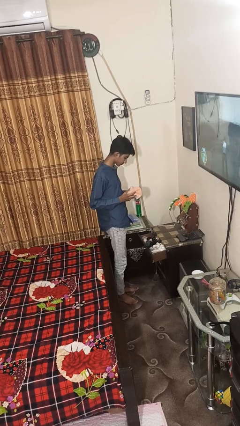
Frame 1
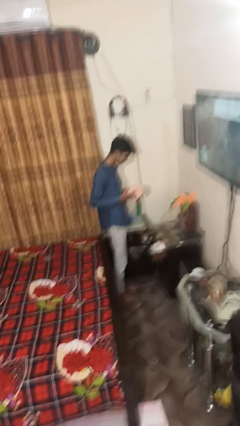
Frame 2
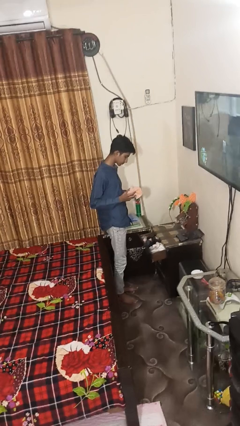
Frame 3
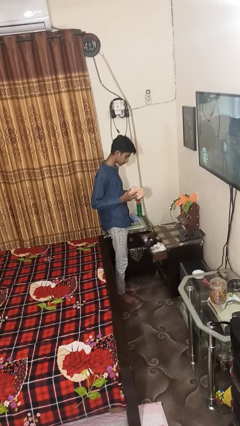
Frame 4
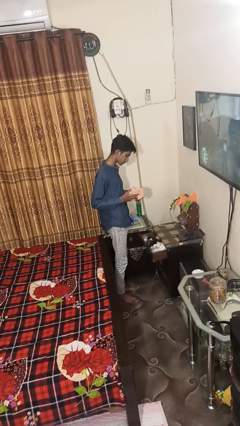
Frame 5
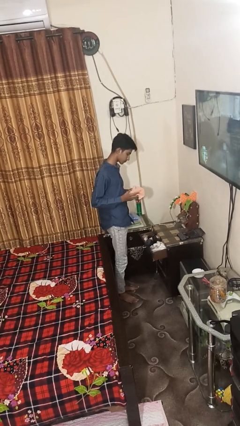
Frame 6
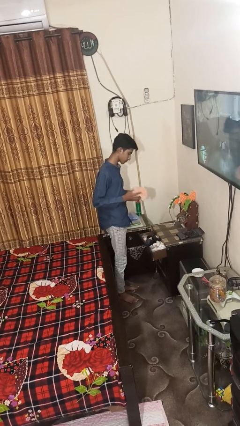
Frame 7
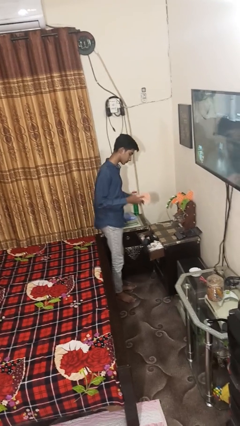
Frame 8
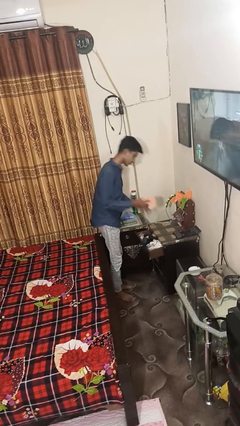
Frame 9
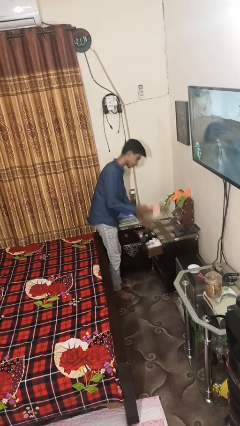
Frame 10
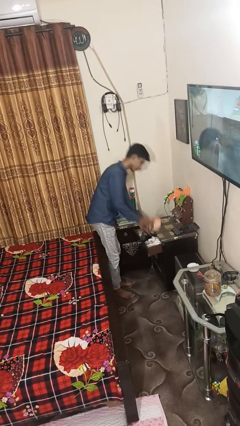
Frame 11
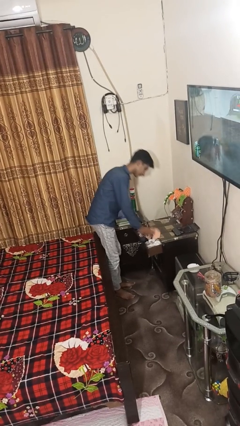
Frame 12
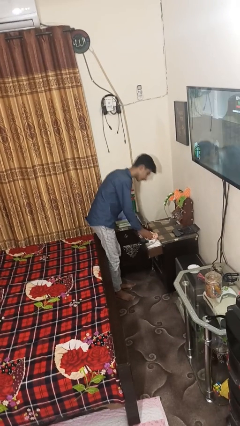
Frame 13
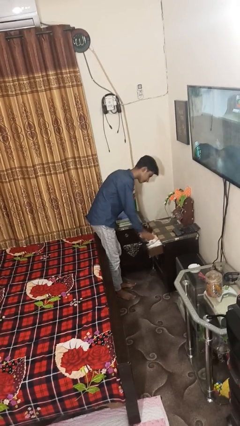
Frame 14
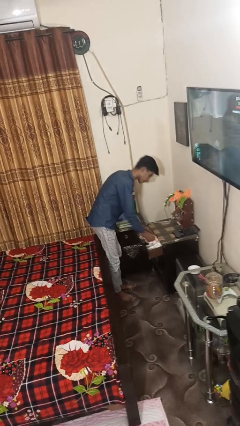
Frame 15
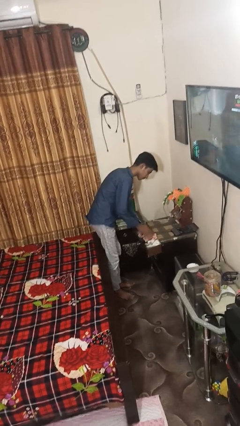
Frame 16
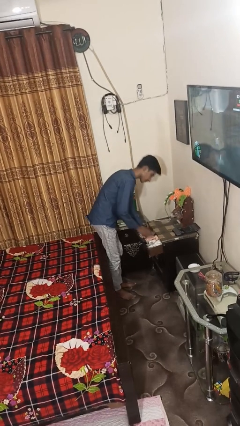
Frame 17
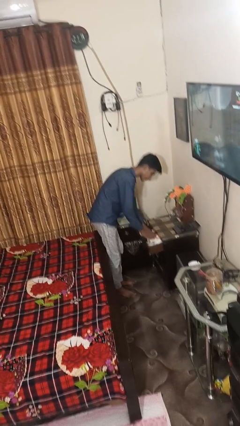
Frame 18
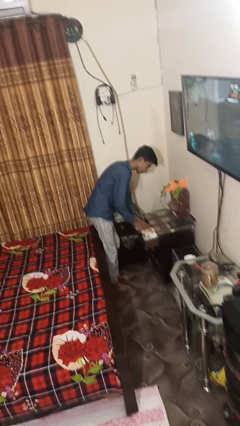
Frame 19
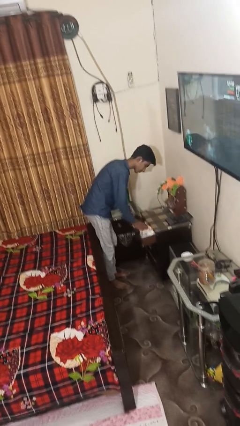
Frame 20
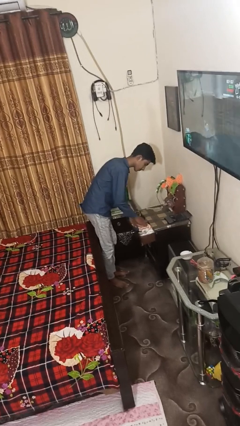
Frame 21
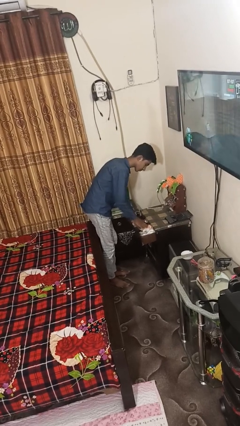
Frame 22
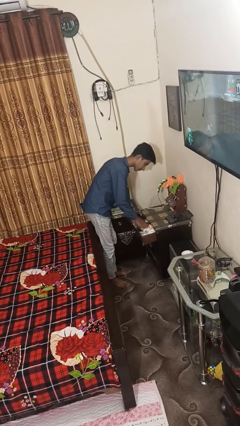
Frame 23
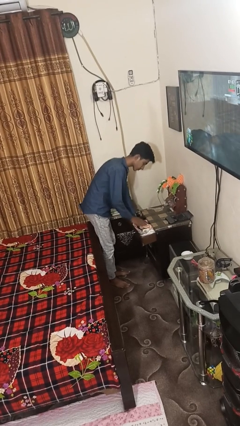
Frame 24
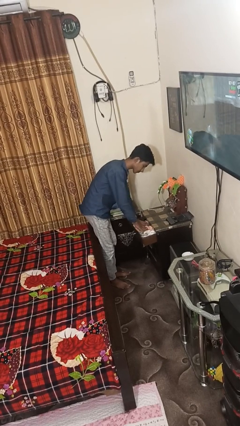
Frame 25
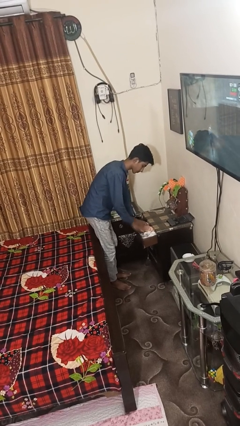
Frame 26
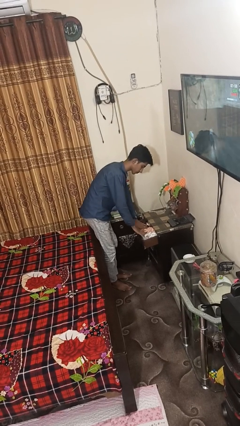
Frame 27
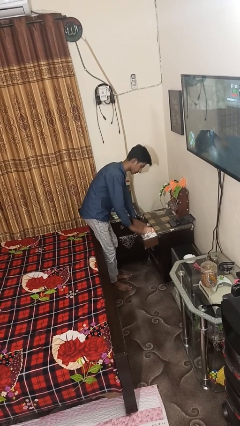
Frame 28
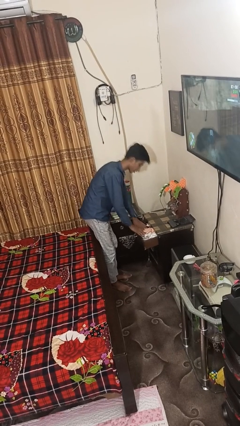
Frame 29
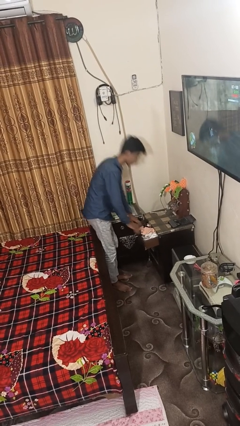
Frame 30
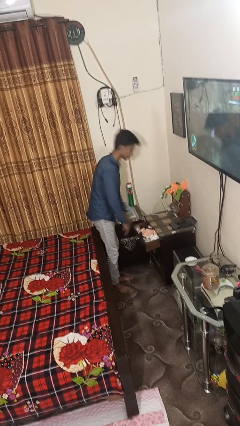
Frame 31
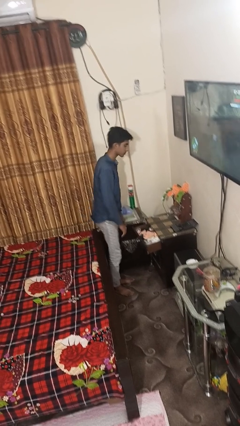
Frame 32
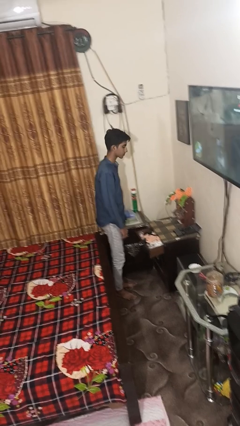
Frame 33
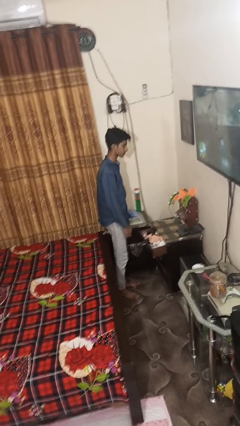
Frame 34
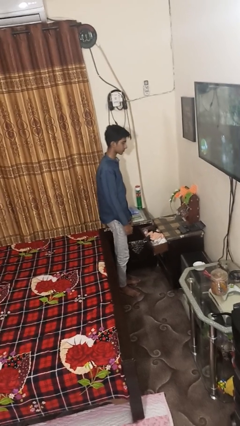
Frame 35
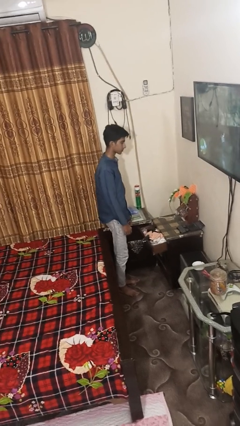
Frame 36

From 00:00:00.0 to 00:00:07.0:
person puts clothes into dresser

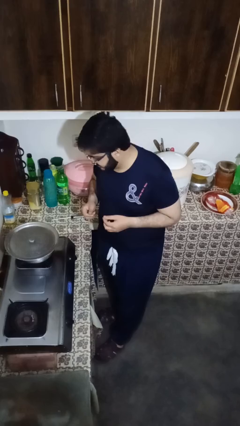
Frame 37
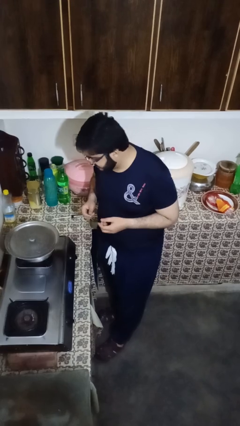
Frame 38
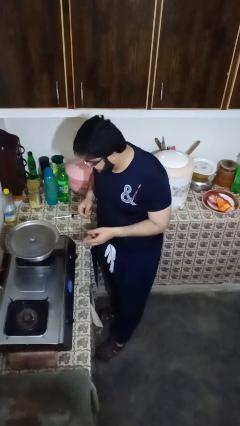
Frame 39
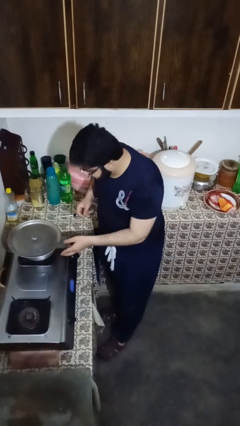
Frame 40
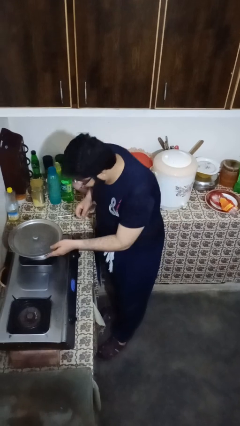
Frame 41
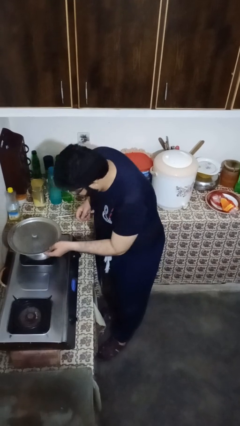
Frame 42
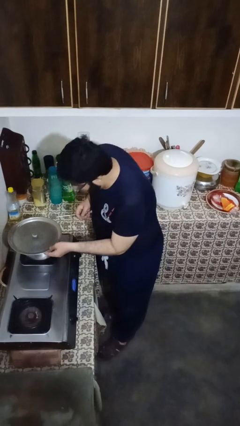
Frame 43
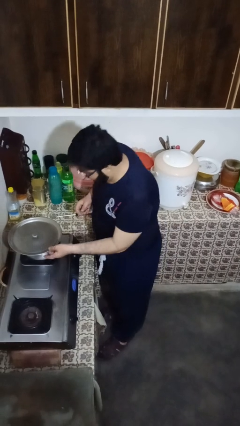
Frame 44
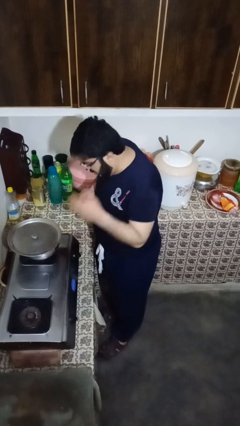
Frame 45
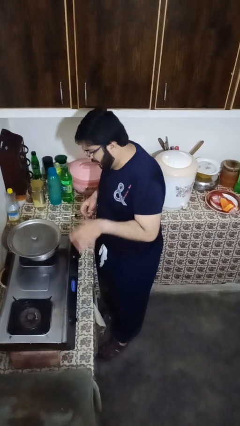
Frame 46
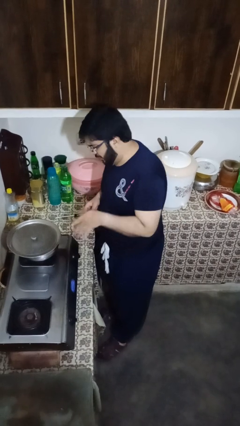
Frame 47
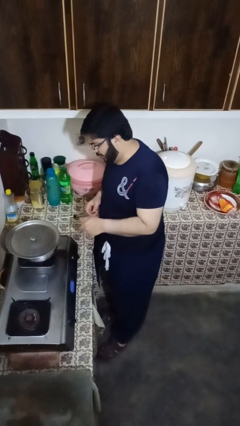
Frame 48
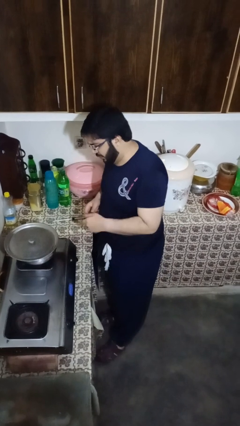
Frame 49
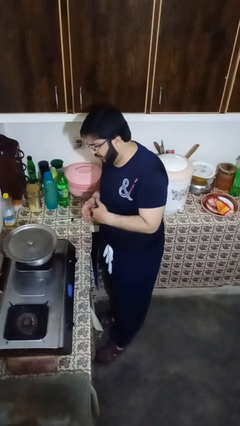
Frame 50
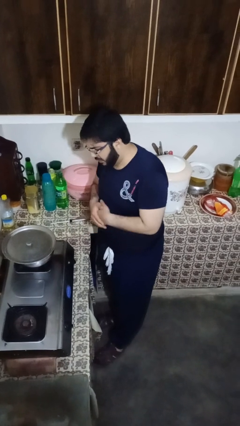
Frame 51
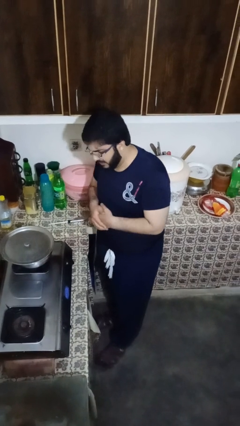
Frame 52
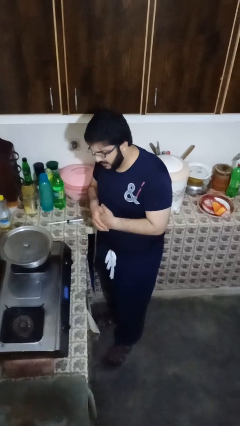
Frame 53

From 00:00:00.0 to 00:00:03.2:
person burns hand

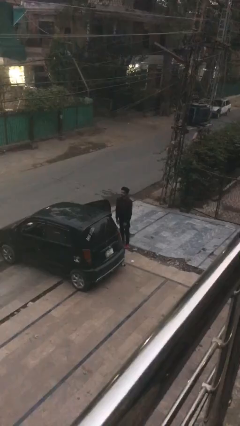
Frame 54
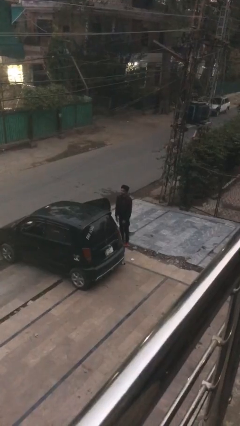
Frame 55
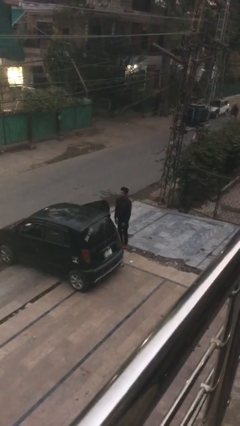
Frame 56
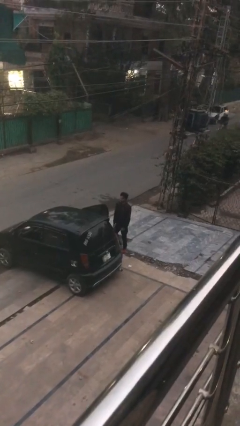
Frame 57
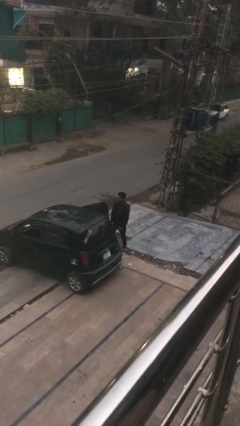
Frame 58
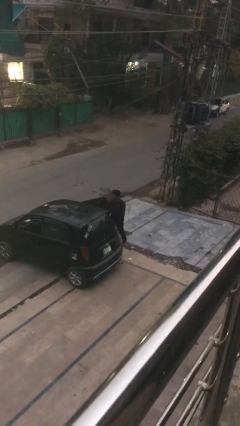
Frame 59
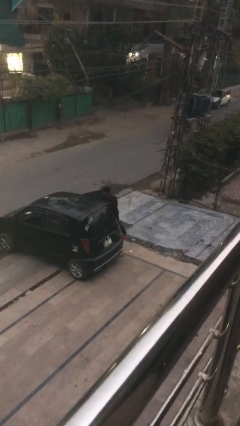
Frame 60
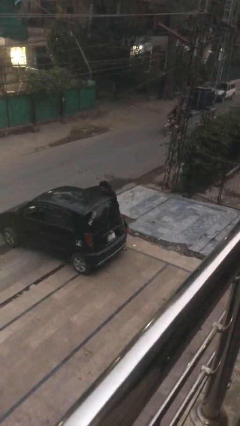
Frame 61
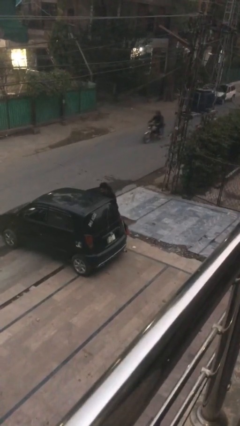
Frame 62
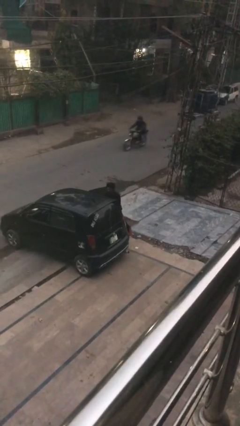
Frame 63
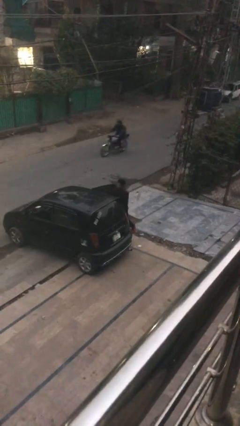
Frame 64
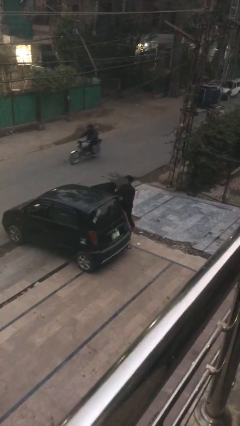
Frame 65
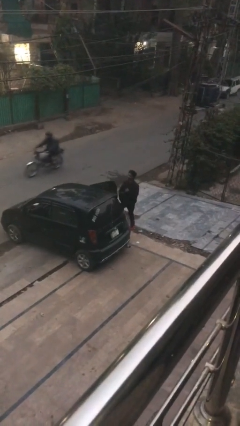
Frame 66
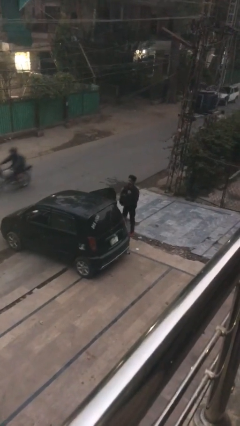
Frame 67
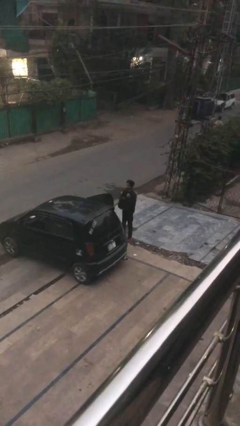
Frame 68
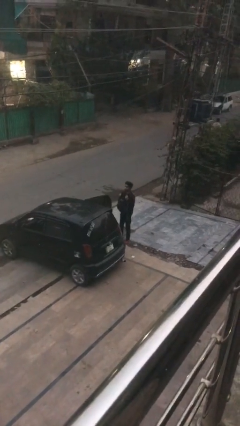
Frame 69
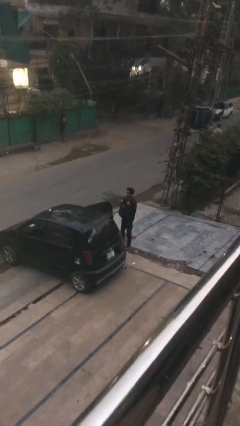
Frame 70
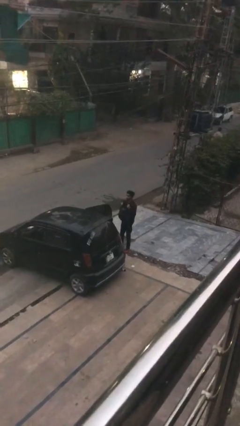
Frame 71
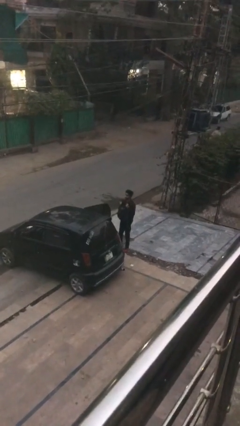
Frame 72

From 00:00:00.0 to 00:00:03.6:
person unloads car

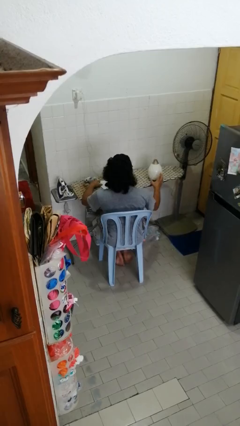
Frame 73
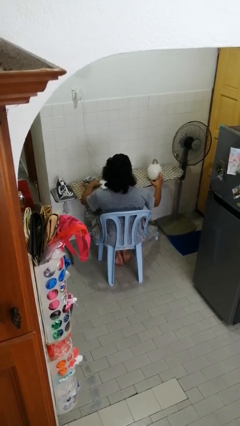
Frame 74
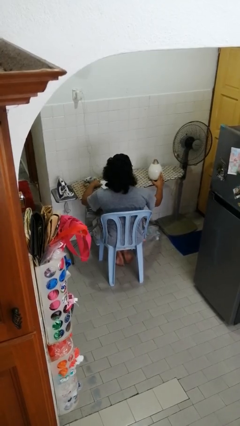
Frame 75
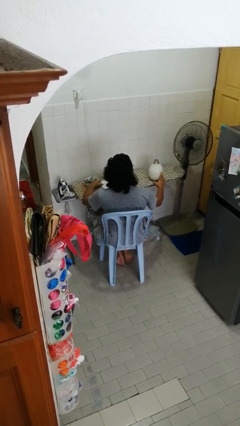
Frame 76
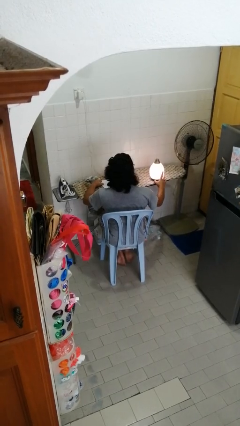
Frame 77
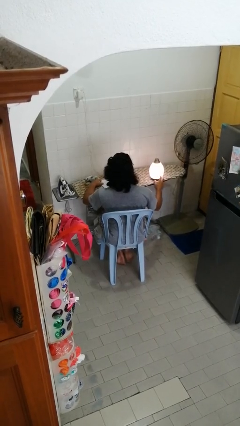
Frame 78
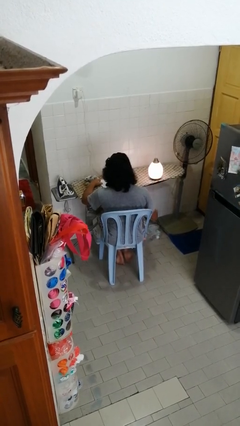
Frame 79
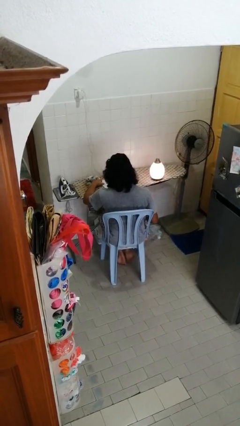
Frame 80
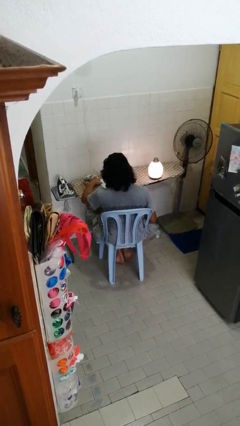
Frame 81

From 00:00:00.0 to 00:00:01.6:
person turns on lamp

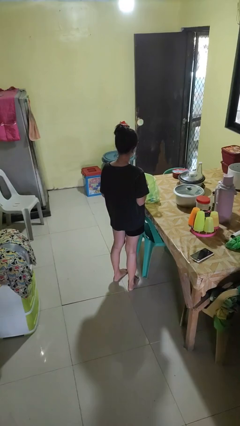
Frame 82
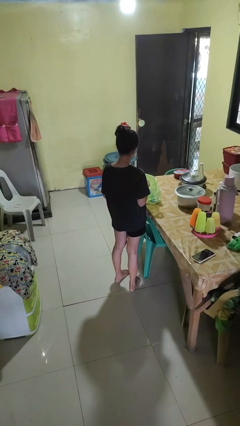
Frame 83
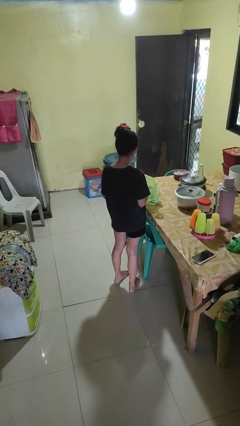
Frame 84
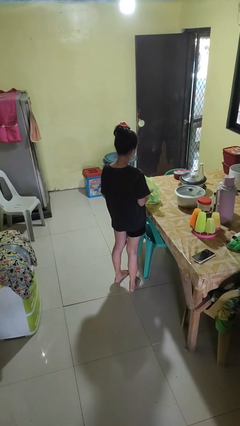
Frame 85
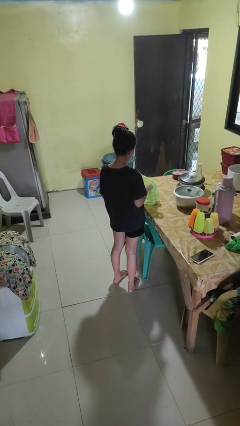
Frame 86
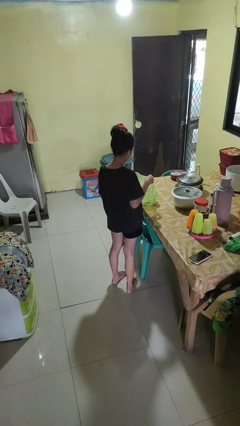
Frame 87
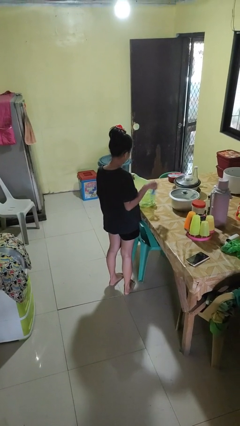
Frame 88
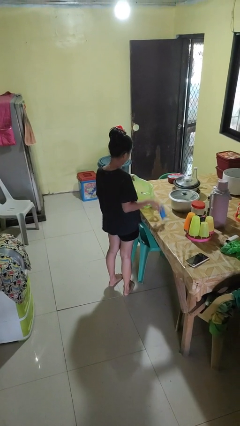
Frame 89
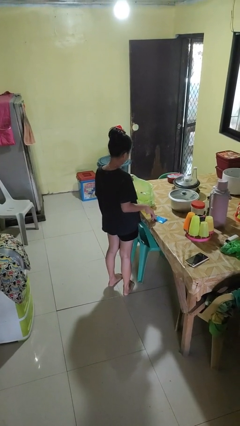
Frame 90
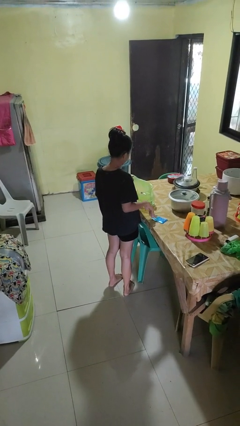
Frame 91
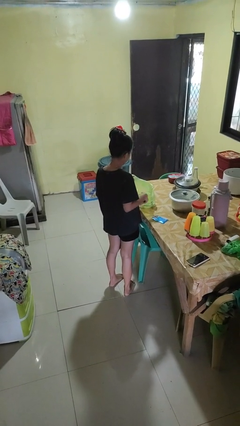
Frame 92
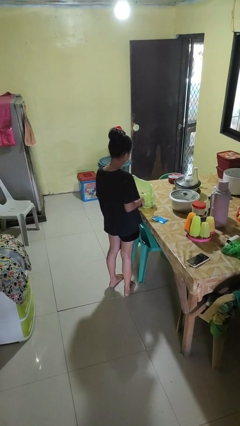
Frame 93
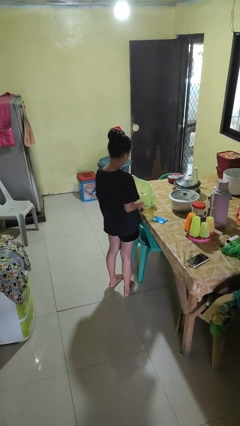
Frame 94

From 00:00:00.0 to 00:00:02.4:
person takes object from bag
